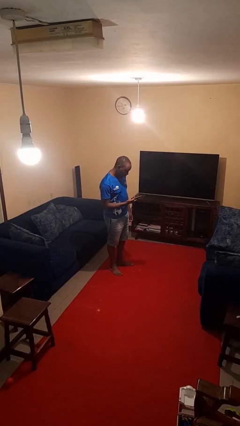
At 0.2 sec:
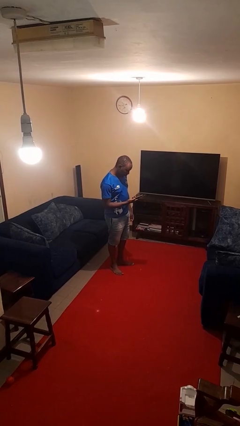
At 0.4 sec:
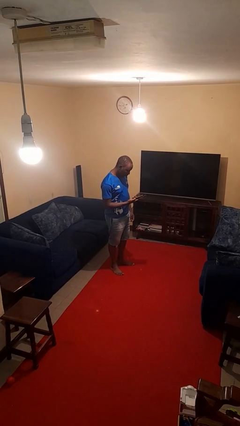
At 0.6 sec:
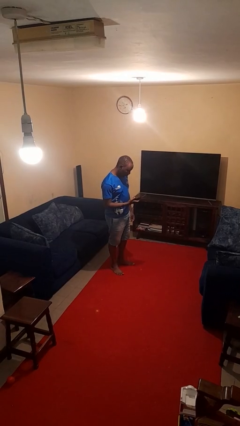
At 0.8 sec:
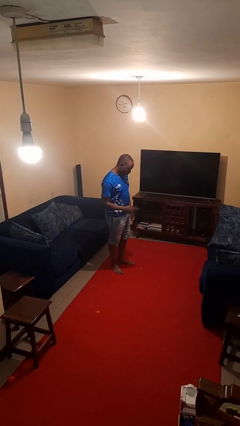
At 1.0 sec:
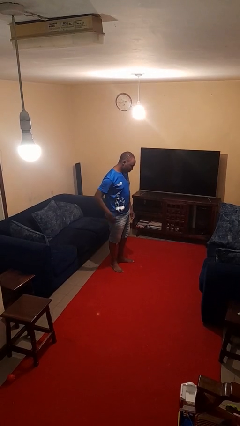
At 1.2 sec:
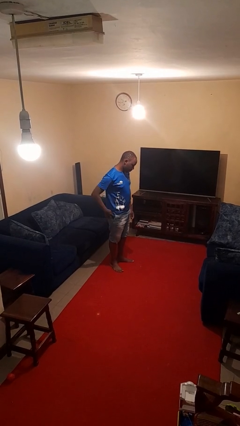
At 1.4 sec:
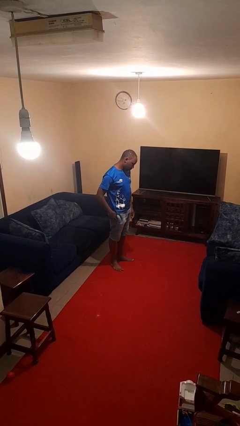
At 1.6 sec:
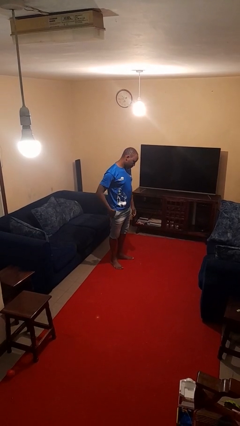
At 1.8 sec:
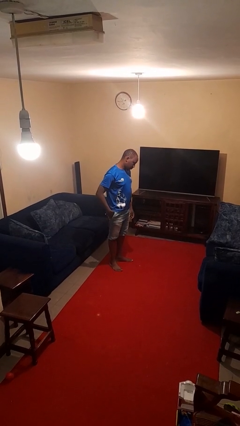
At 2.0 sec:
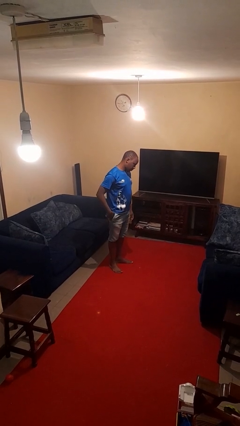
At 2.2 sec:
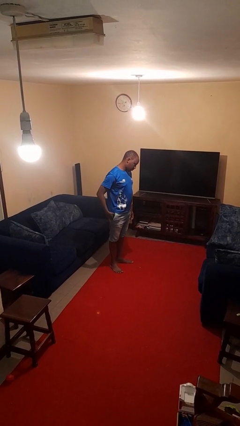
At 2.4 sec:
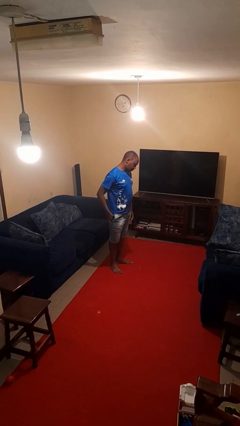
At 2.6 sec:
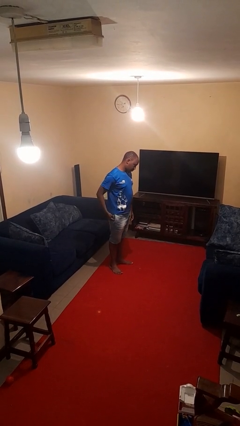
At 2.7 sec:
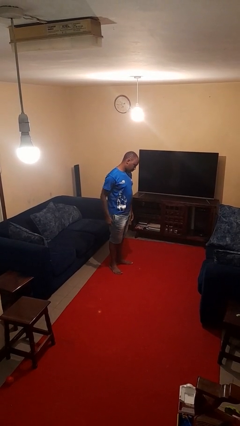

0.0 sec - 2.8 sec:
person puts phone into pocket

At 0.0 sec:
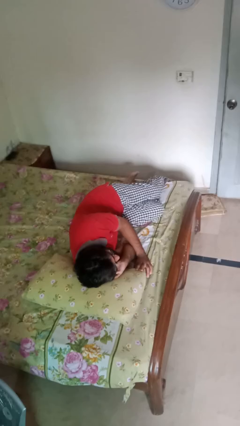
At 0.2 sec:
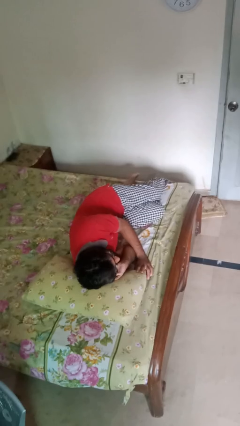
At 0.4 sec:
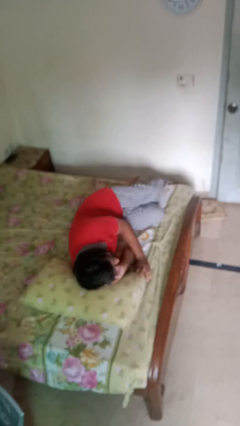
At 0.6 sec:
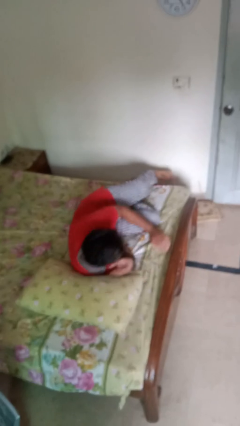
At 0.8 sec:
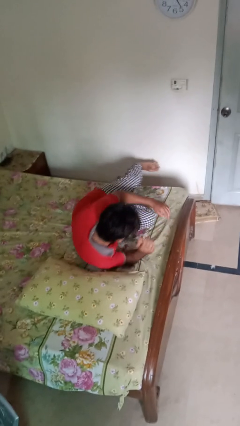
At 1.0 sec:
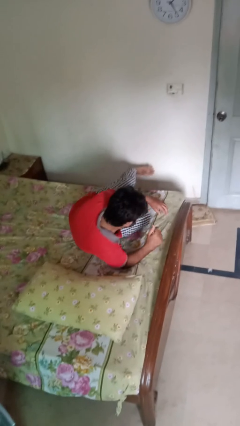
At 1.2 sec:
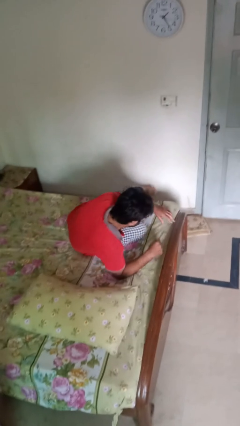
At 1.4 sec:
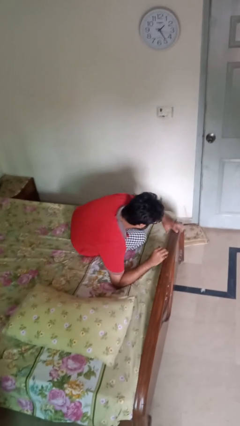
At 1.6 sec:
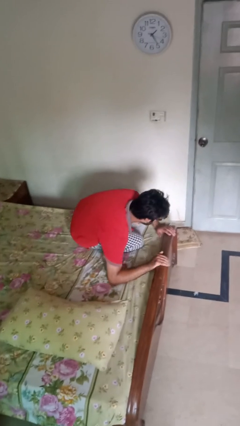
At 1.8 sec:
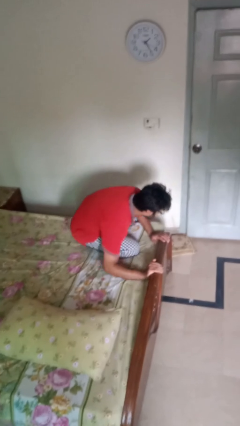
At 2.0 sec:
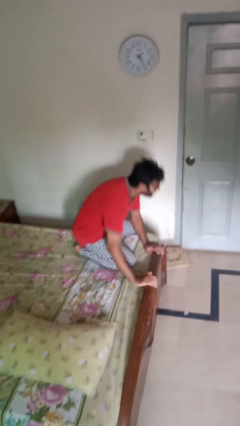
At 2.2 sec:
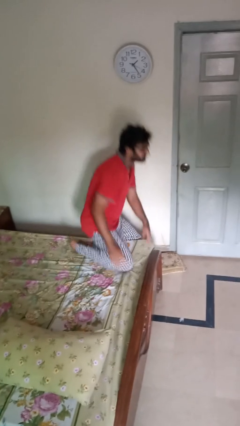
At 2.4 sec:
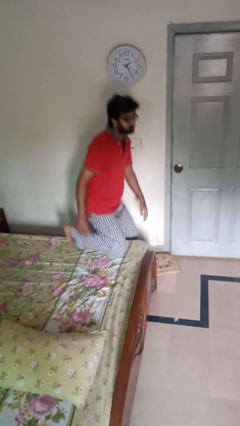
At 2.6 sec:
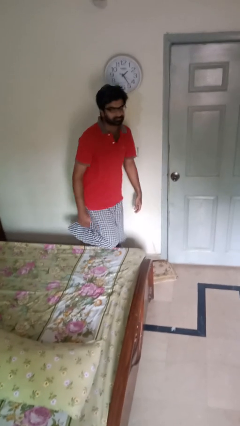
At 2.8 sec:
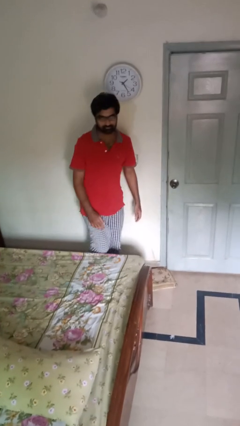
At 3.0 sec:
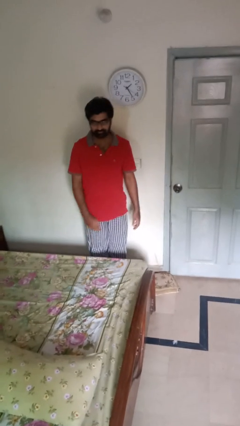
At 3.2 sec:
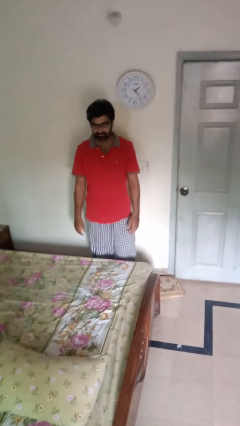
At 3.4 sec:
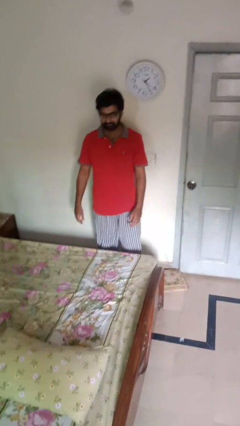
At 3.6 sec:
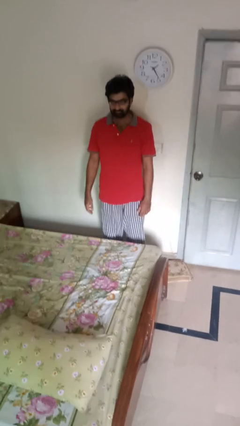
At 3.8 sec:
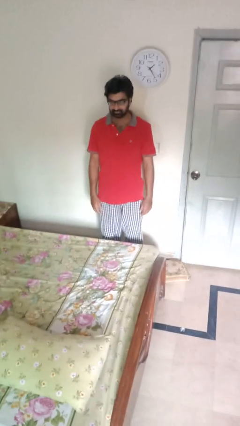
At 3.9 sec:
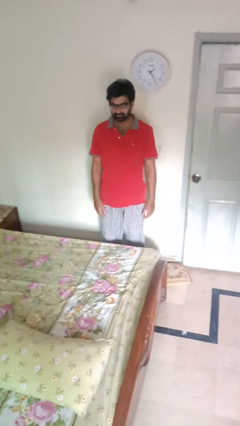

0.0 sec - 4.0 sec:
person stands up

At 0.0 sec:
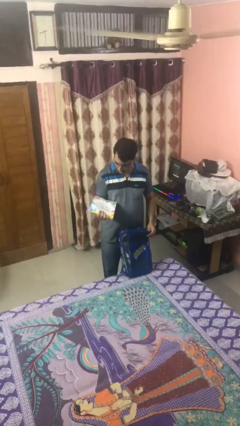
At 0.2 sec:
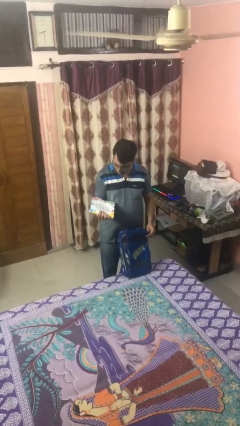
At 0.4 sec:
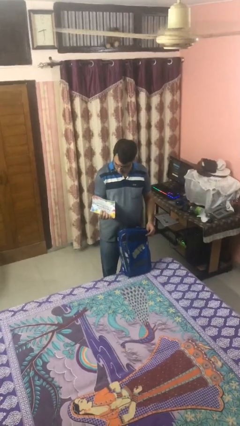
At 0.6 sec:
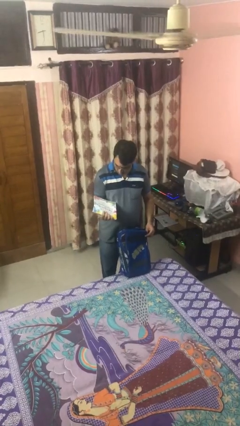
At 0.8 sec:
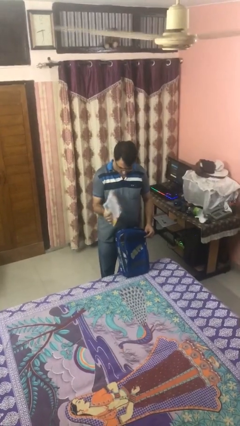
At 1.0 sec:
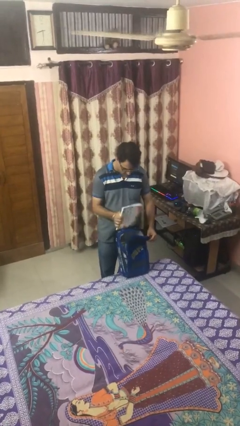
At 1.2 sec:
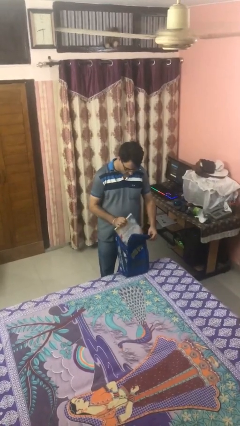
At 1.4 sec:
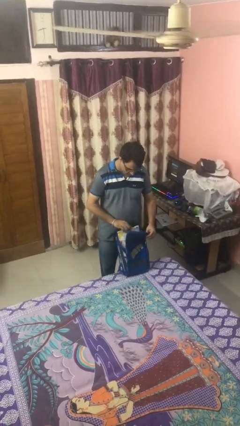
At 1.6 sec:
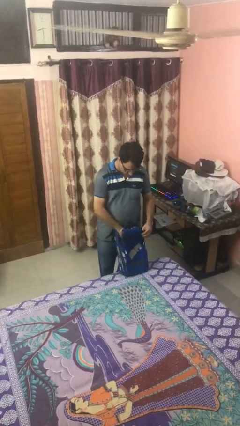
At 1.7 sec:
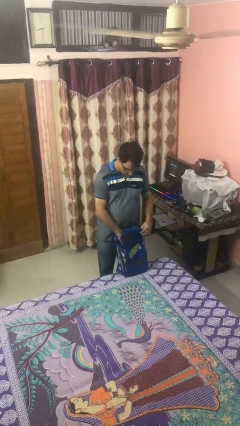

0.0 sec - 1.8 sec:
person puts object into backpack

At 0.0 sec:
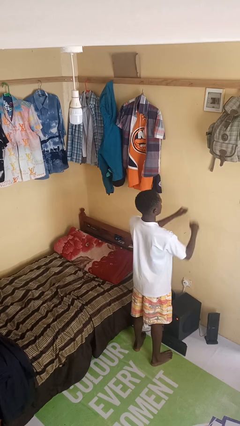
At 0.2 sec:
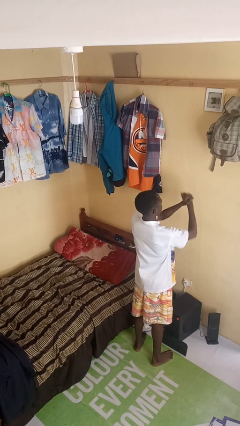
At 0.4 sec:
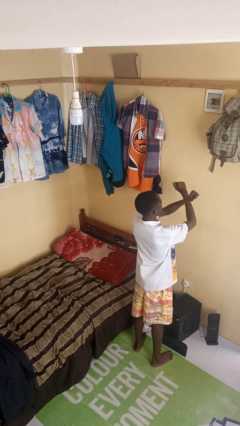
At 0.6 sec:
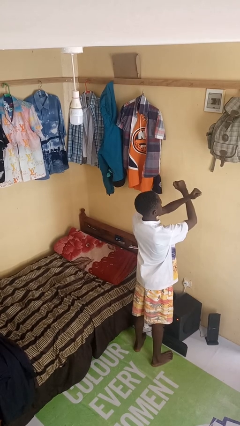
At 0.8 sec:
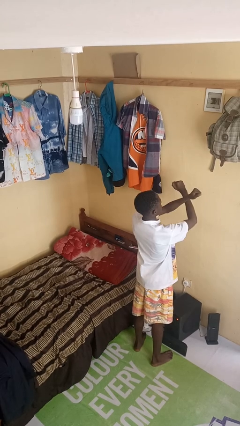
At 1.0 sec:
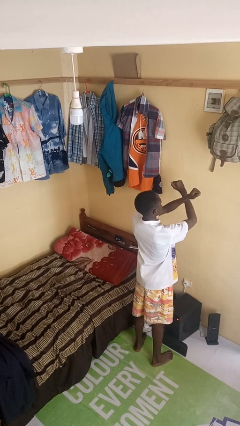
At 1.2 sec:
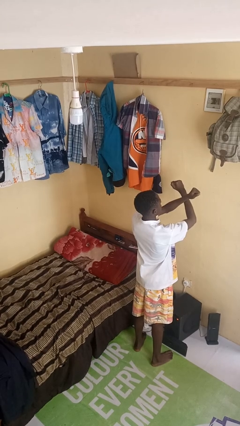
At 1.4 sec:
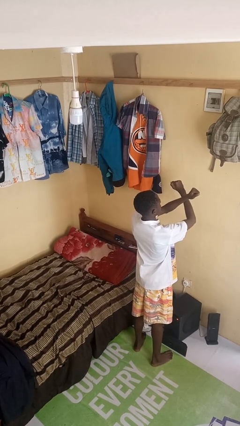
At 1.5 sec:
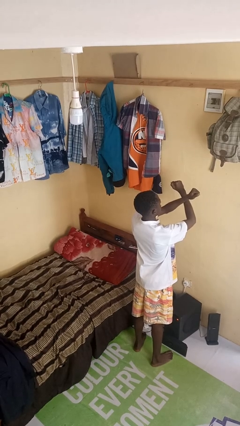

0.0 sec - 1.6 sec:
person gestures arms x

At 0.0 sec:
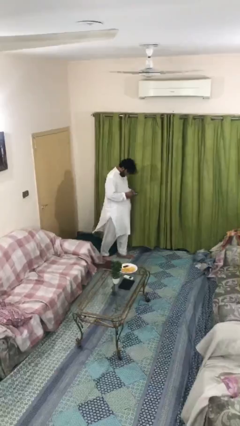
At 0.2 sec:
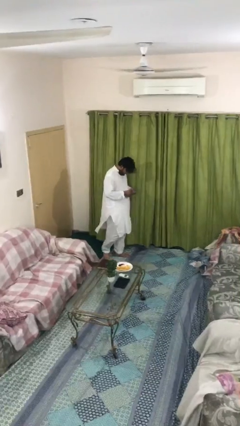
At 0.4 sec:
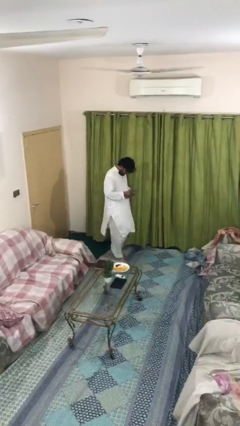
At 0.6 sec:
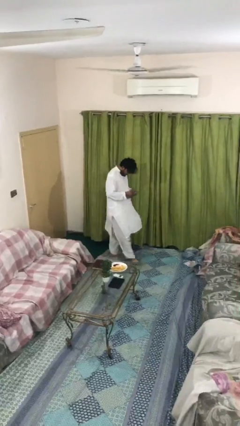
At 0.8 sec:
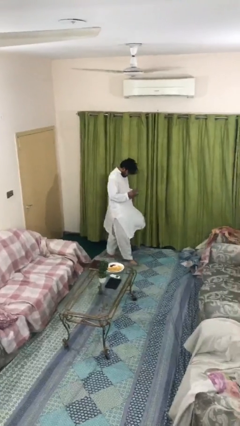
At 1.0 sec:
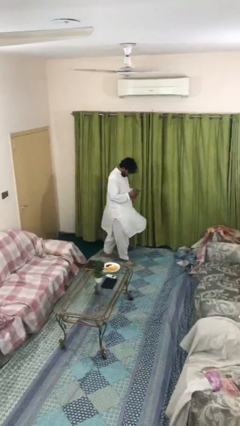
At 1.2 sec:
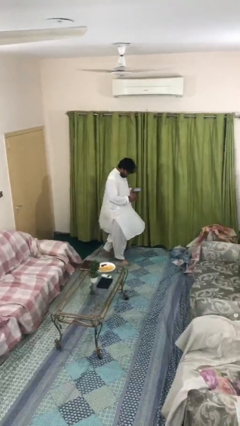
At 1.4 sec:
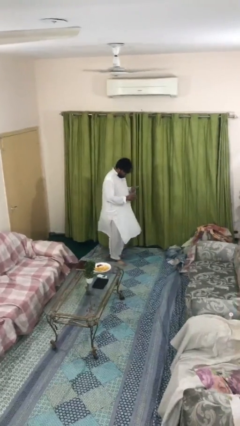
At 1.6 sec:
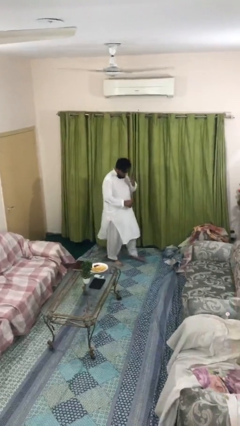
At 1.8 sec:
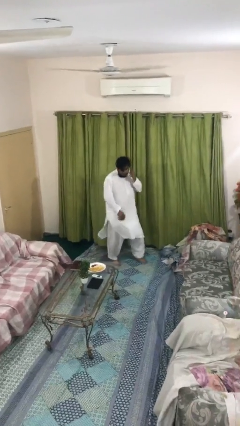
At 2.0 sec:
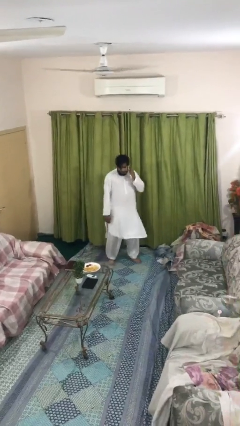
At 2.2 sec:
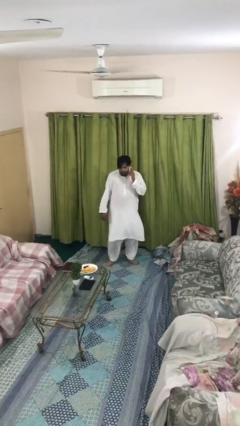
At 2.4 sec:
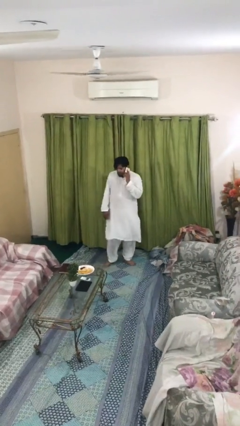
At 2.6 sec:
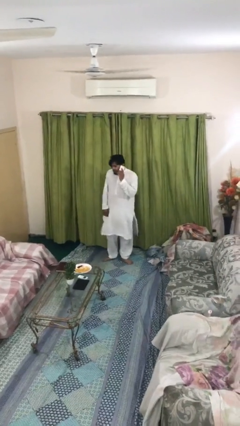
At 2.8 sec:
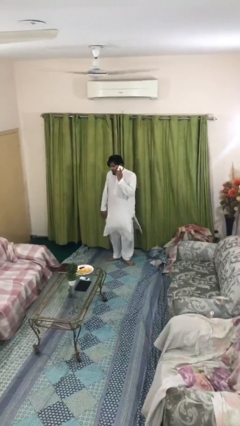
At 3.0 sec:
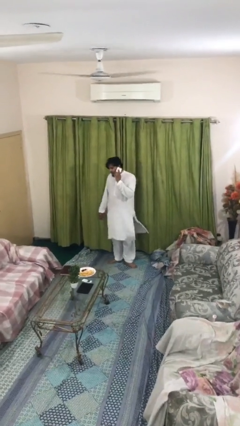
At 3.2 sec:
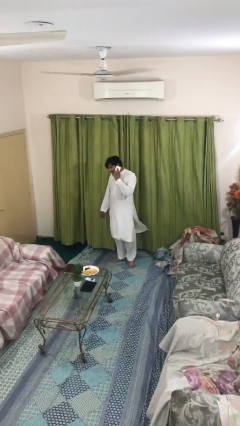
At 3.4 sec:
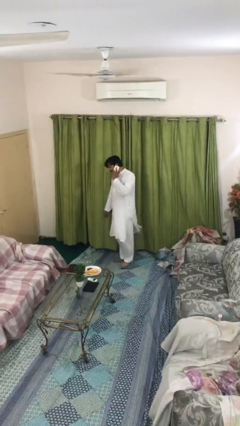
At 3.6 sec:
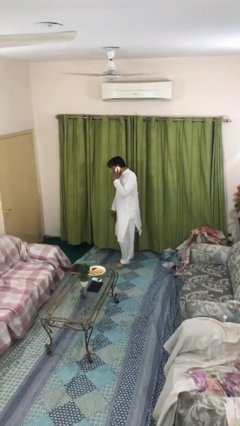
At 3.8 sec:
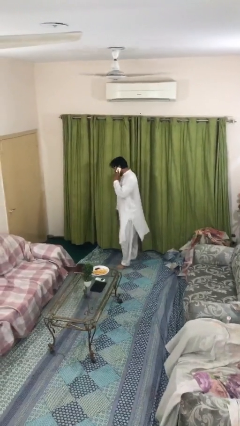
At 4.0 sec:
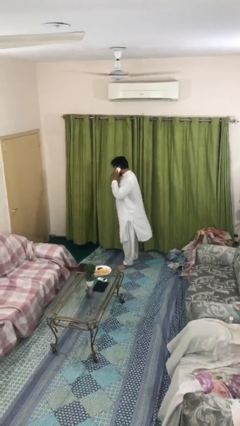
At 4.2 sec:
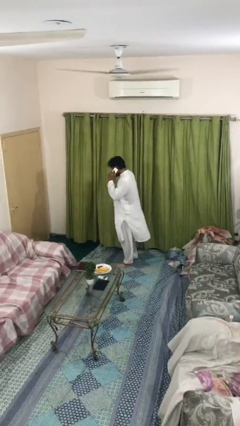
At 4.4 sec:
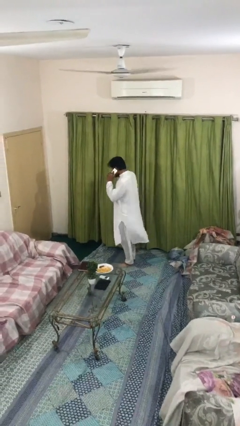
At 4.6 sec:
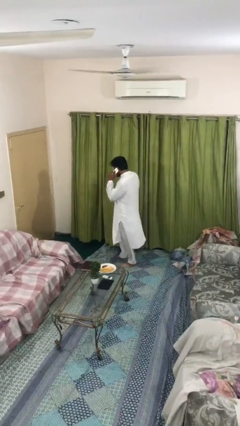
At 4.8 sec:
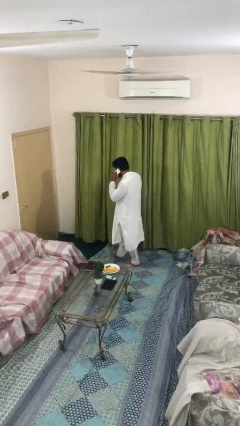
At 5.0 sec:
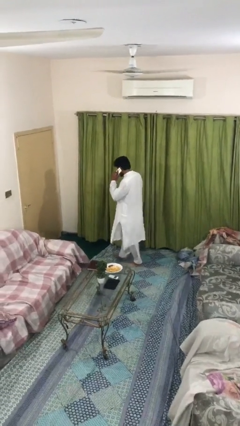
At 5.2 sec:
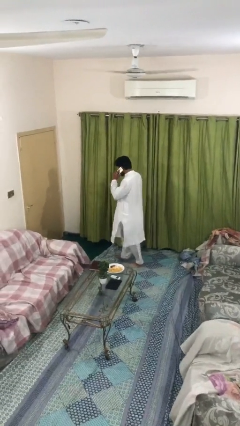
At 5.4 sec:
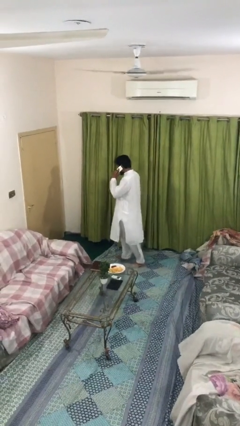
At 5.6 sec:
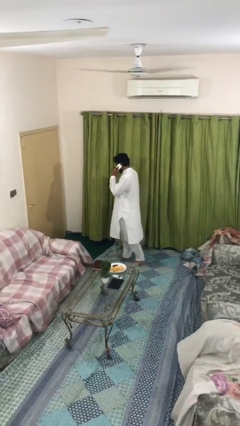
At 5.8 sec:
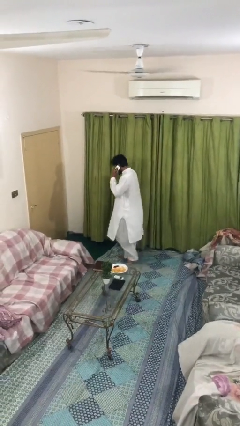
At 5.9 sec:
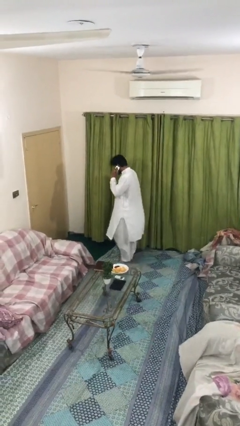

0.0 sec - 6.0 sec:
person talks on phone

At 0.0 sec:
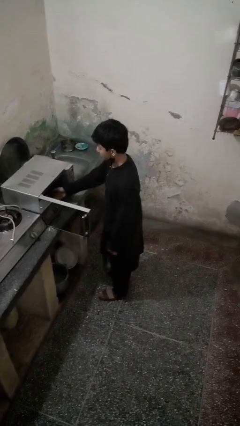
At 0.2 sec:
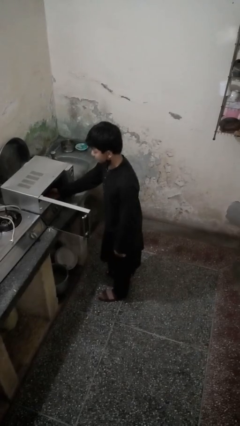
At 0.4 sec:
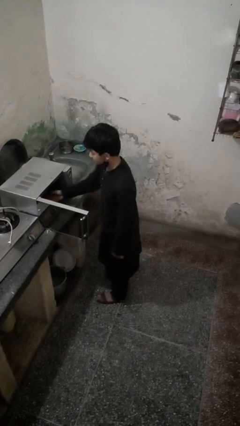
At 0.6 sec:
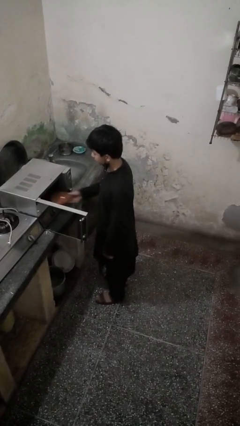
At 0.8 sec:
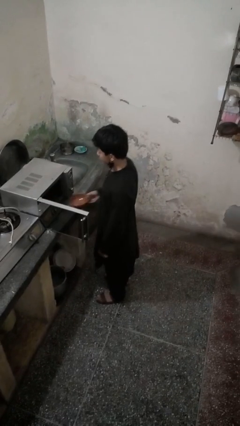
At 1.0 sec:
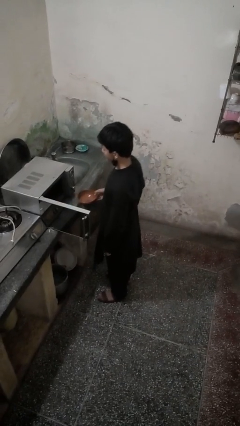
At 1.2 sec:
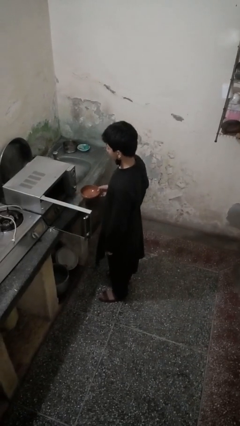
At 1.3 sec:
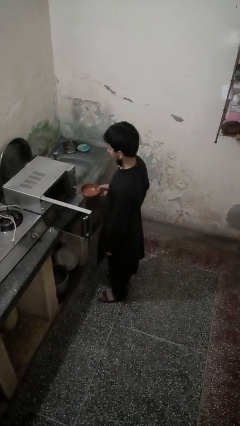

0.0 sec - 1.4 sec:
person takes object from microwave
